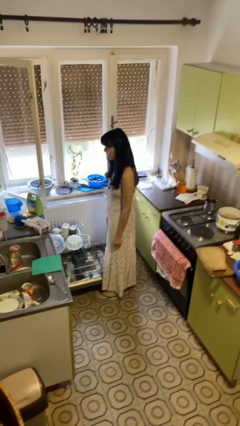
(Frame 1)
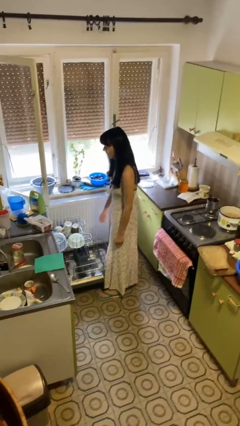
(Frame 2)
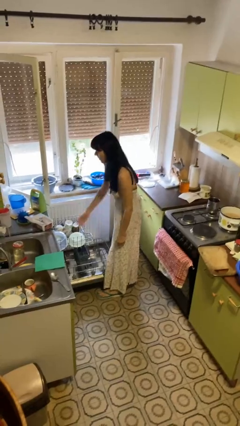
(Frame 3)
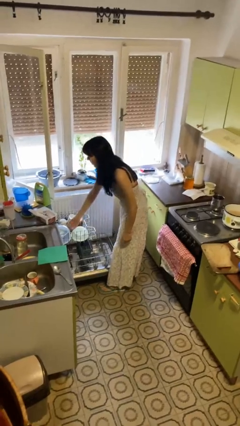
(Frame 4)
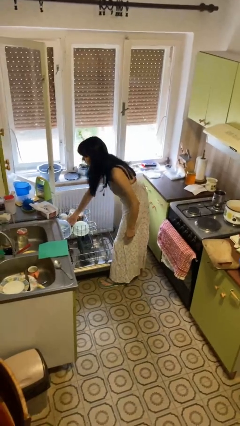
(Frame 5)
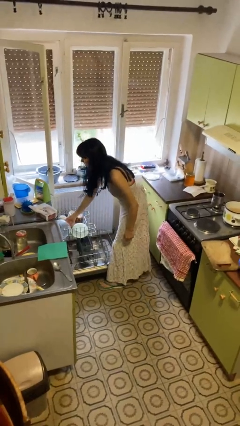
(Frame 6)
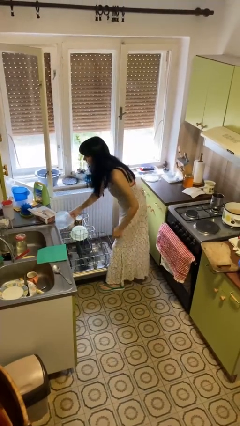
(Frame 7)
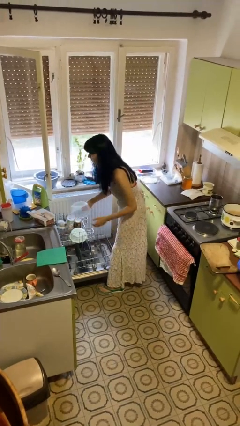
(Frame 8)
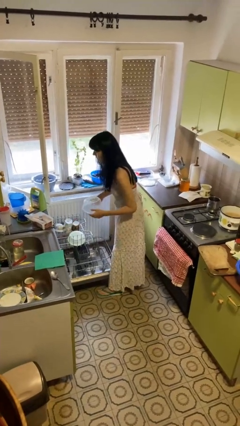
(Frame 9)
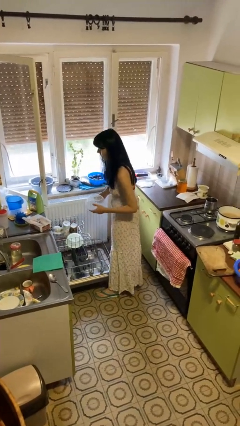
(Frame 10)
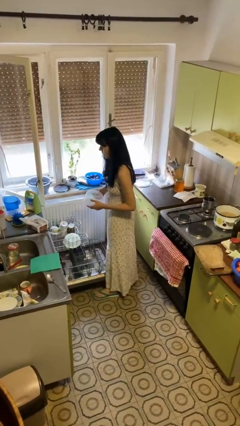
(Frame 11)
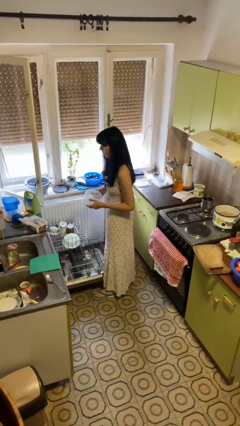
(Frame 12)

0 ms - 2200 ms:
person unloads dishwasher

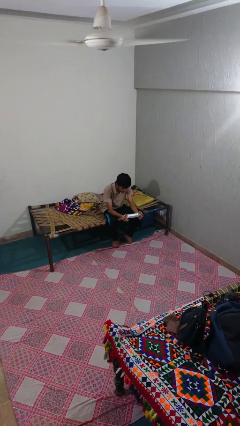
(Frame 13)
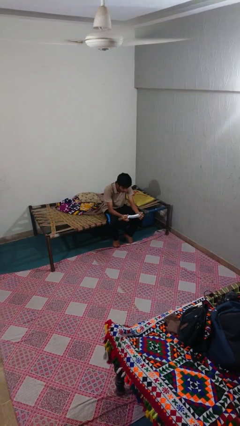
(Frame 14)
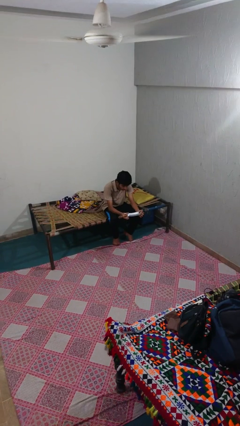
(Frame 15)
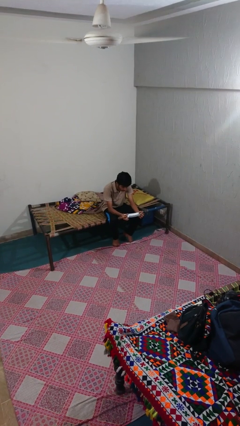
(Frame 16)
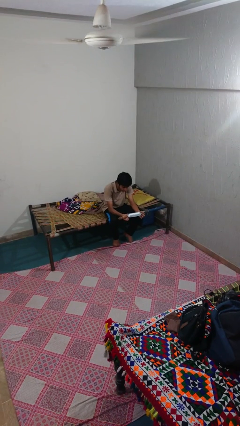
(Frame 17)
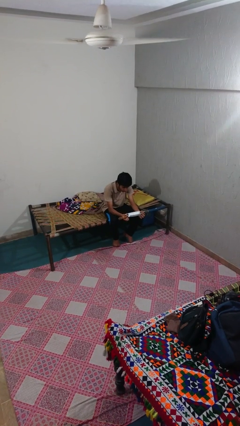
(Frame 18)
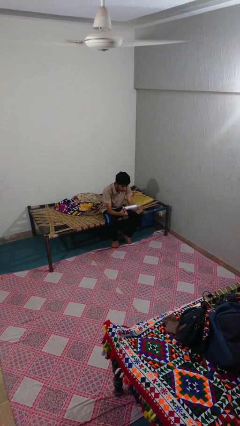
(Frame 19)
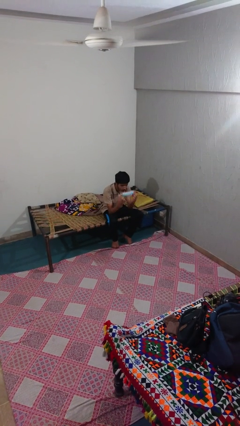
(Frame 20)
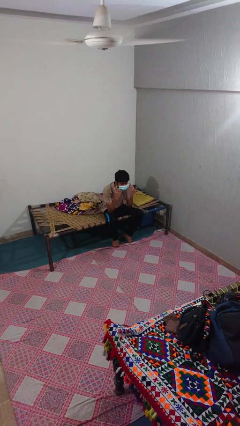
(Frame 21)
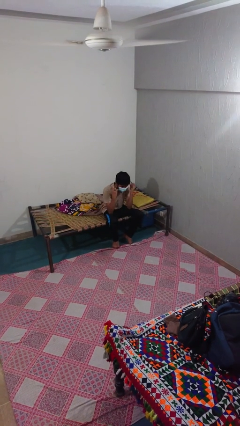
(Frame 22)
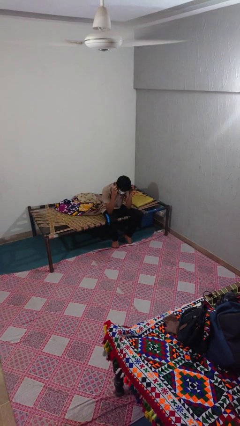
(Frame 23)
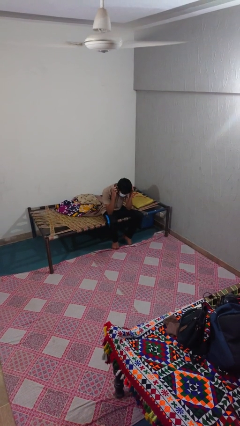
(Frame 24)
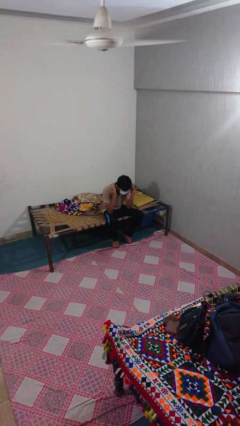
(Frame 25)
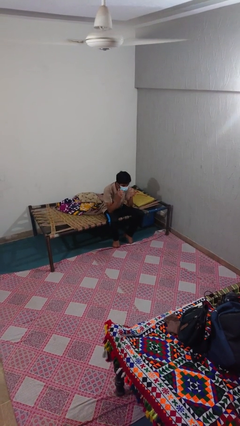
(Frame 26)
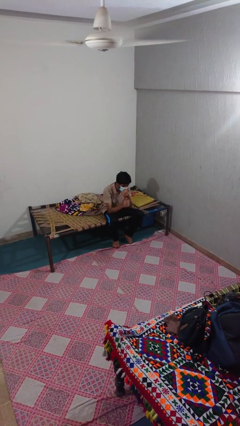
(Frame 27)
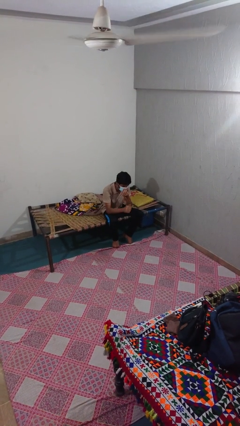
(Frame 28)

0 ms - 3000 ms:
person puts on facemask

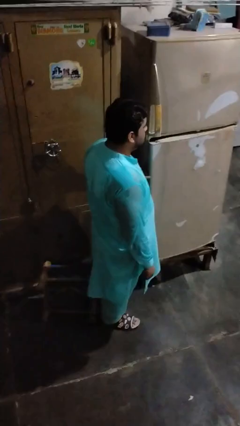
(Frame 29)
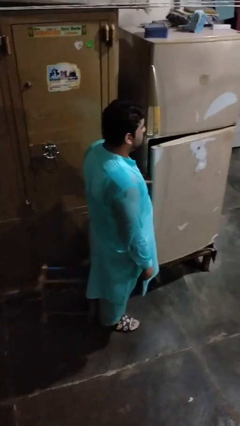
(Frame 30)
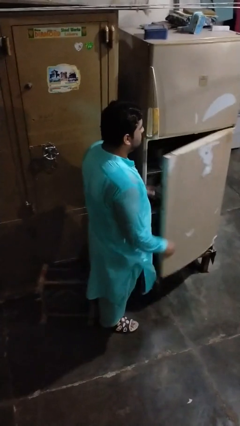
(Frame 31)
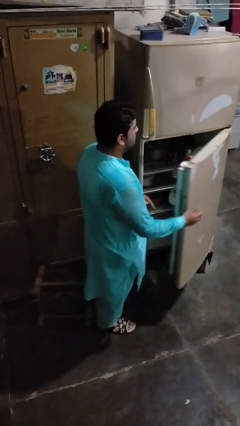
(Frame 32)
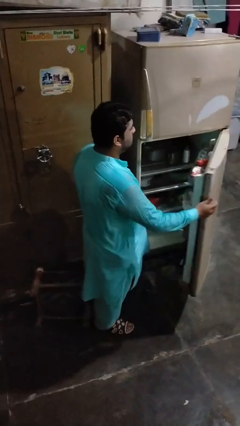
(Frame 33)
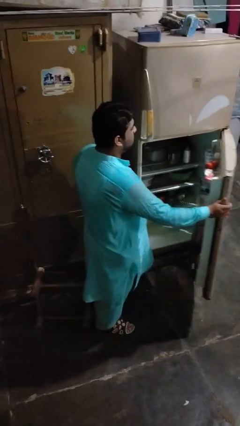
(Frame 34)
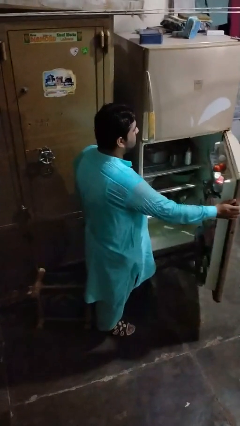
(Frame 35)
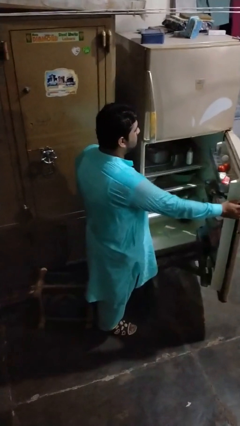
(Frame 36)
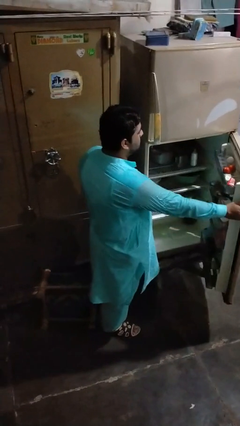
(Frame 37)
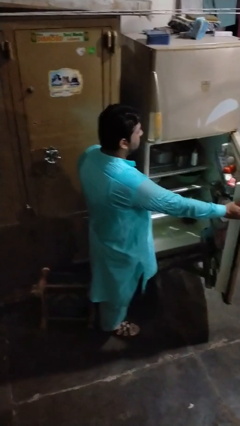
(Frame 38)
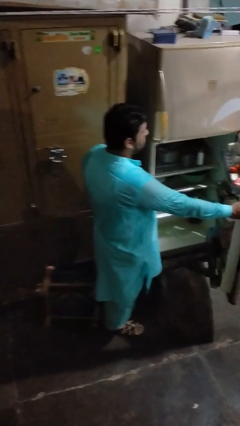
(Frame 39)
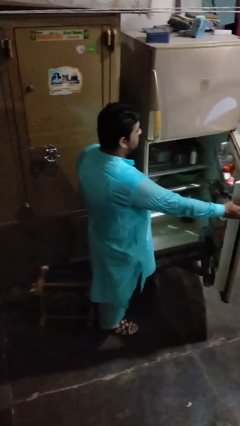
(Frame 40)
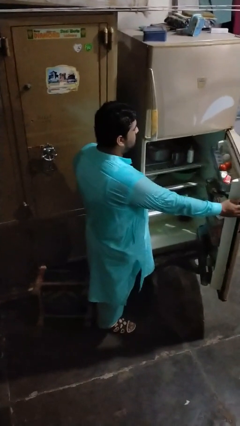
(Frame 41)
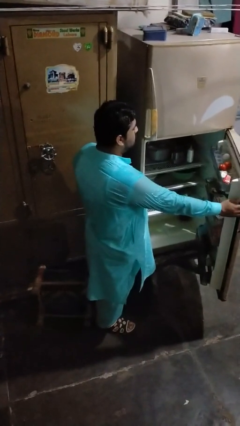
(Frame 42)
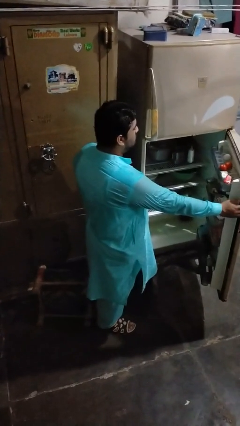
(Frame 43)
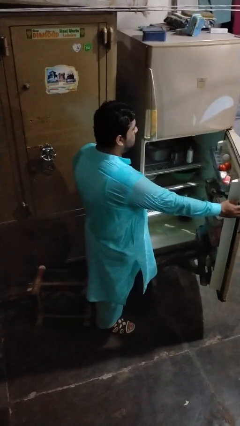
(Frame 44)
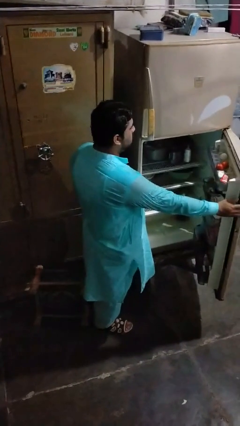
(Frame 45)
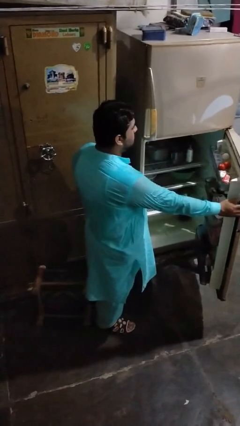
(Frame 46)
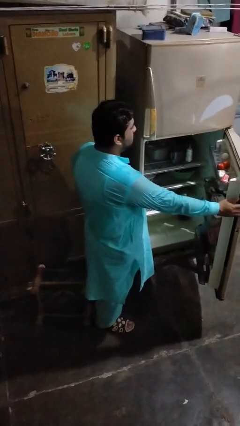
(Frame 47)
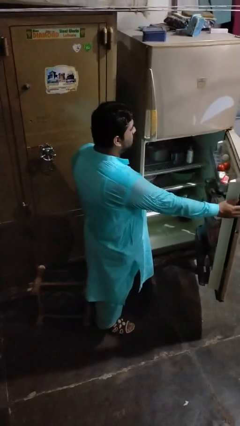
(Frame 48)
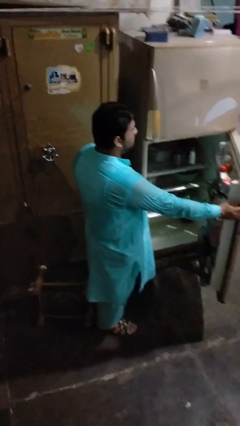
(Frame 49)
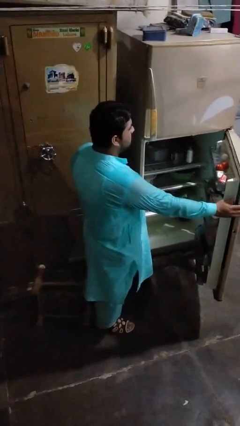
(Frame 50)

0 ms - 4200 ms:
person opens refrigerator

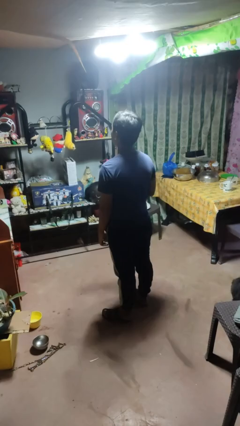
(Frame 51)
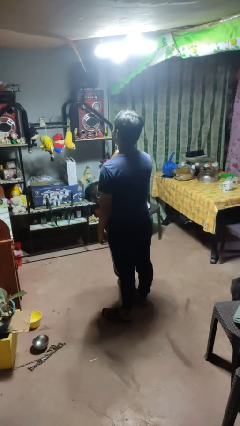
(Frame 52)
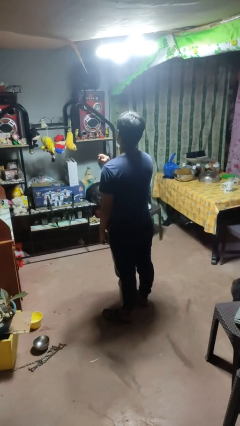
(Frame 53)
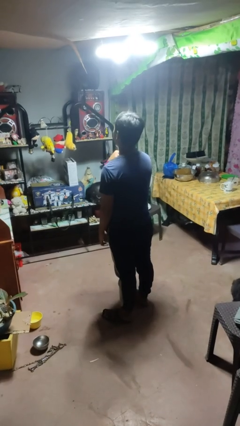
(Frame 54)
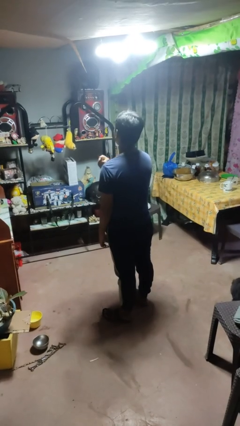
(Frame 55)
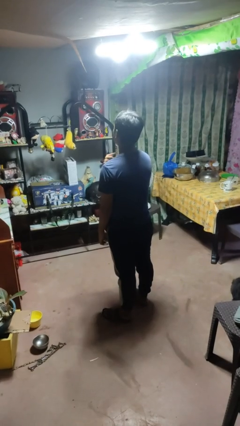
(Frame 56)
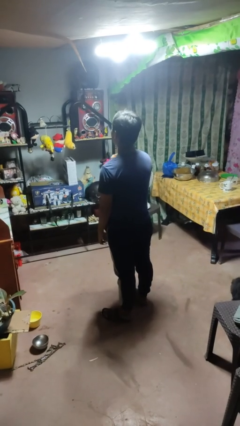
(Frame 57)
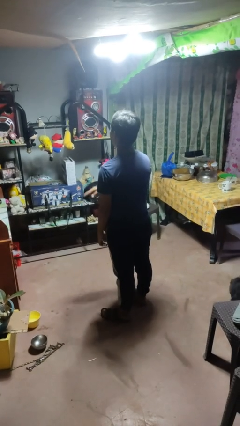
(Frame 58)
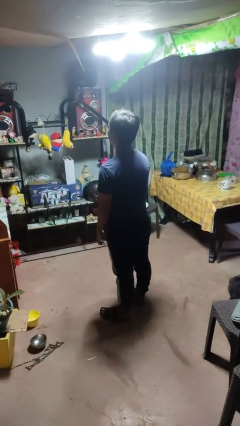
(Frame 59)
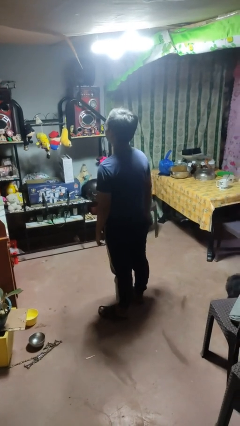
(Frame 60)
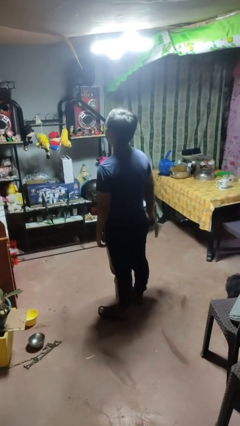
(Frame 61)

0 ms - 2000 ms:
person gestures cut

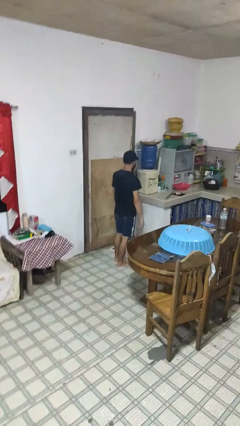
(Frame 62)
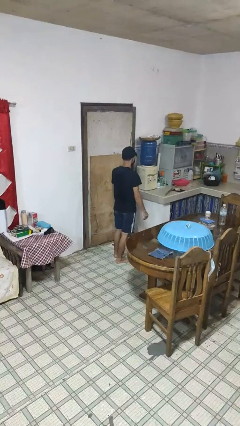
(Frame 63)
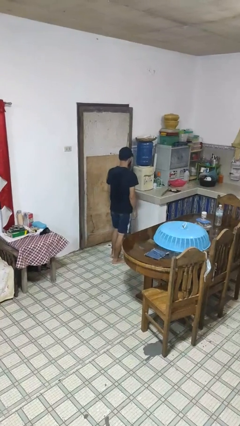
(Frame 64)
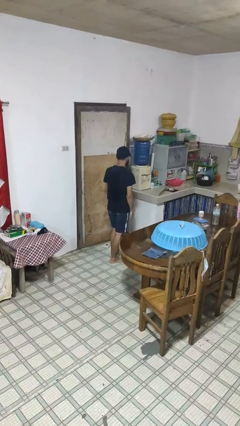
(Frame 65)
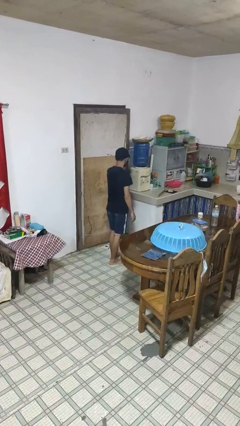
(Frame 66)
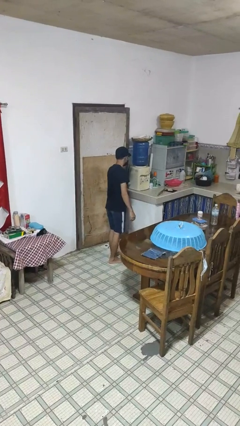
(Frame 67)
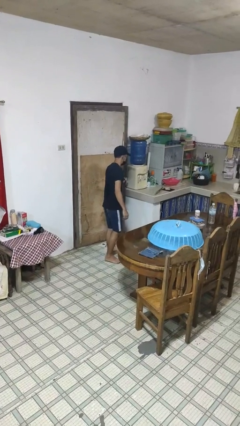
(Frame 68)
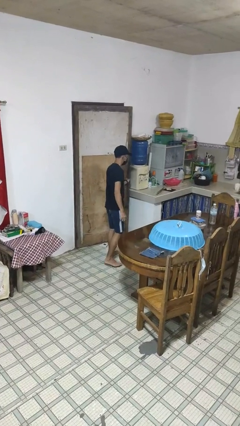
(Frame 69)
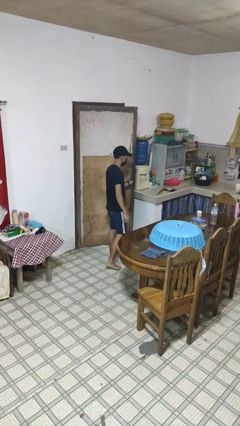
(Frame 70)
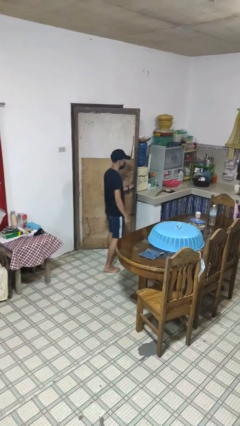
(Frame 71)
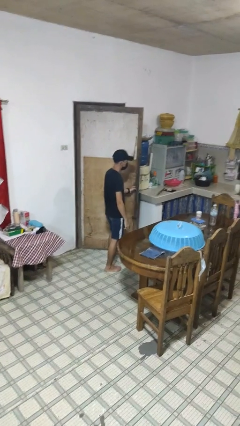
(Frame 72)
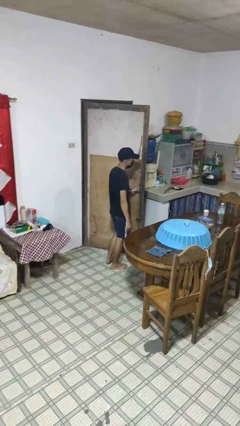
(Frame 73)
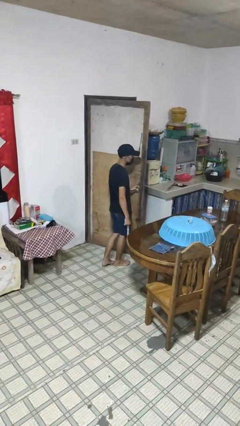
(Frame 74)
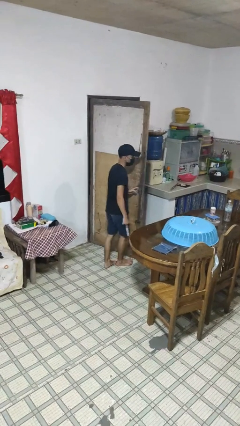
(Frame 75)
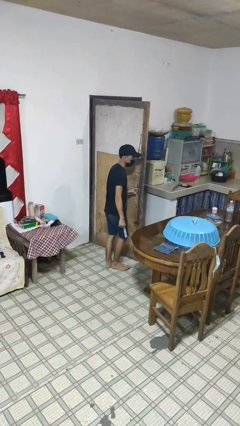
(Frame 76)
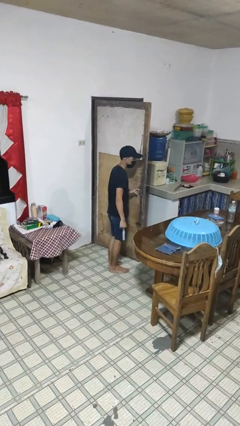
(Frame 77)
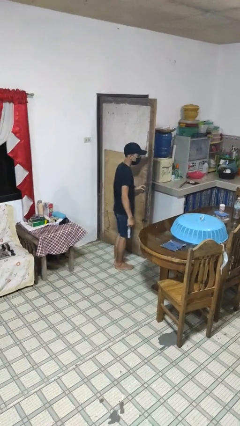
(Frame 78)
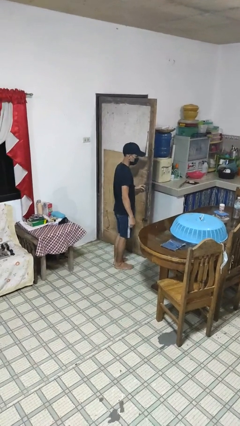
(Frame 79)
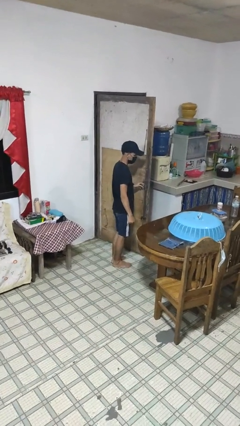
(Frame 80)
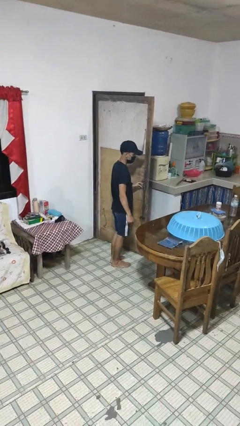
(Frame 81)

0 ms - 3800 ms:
person opens facility door

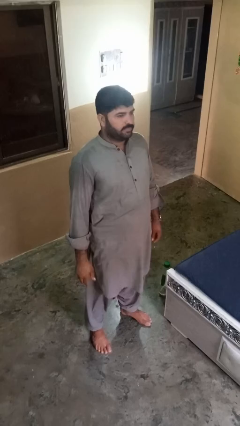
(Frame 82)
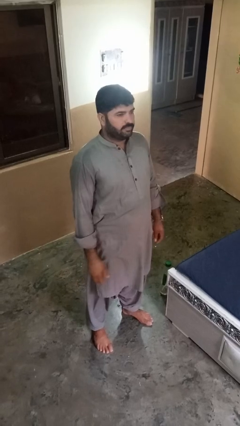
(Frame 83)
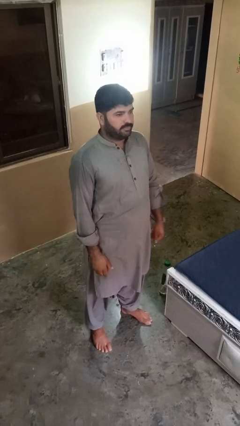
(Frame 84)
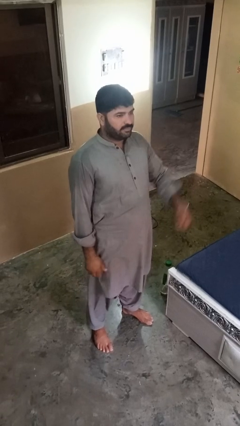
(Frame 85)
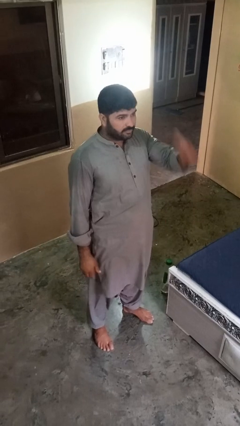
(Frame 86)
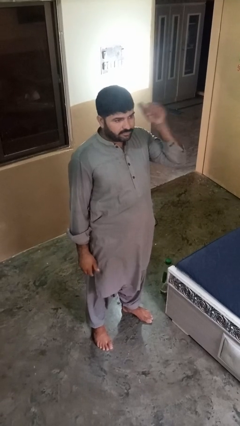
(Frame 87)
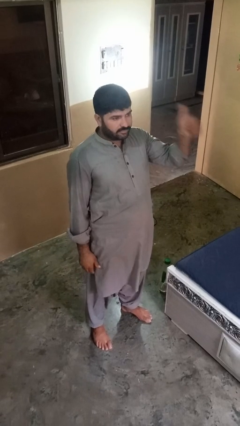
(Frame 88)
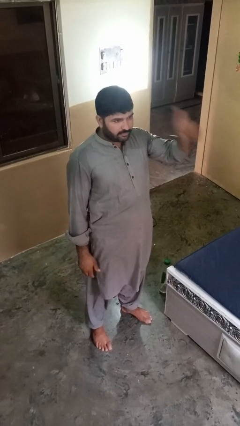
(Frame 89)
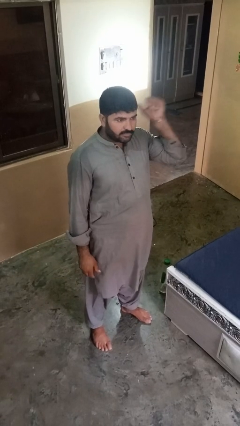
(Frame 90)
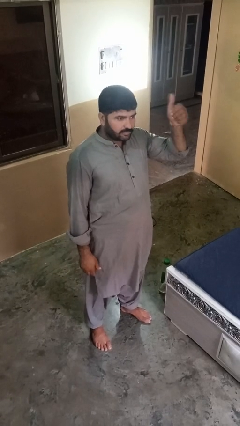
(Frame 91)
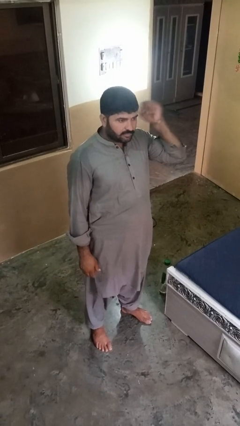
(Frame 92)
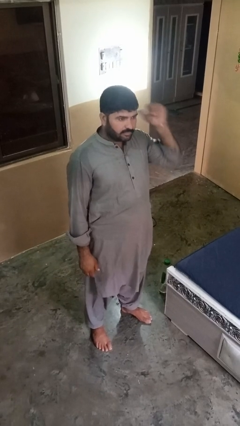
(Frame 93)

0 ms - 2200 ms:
person gestures behind me

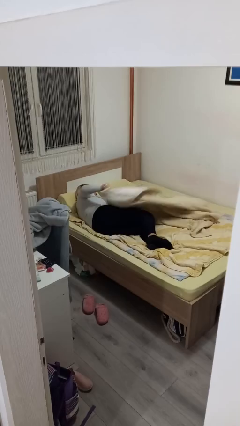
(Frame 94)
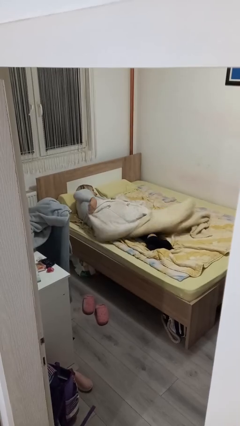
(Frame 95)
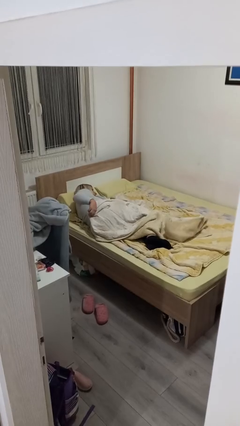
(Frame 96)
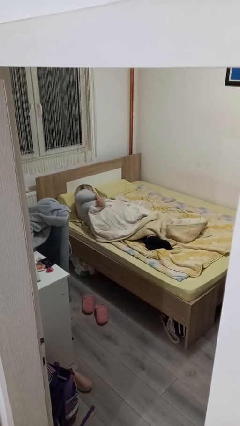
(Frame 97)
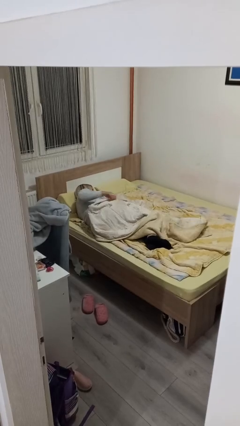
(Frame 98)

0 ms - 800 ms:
person covers with bedsheets
